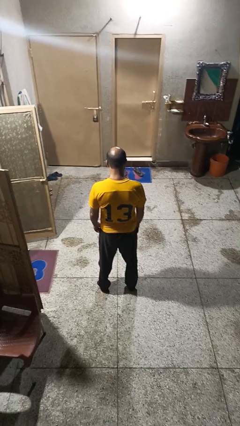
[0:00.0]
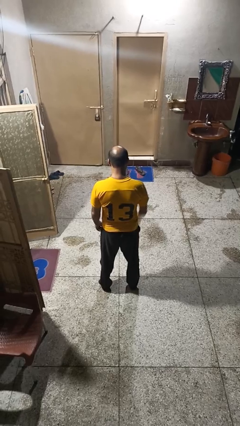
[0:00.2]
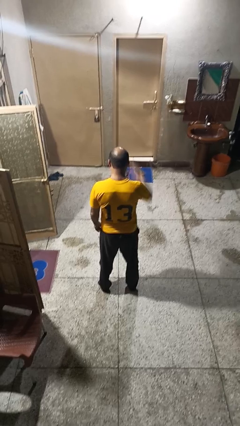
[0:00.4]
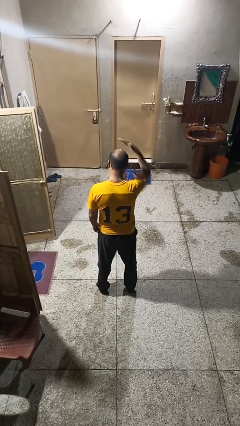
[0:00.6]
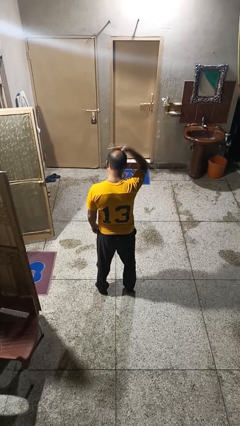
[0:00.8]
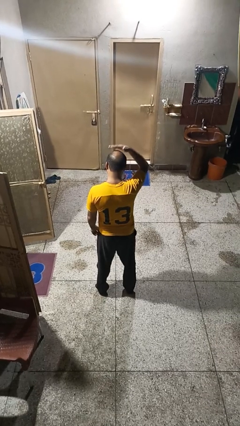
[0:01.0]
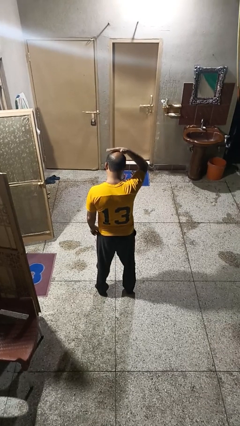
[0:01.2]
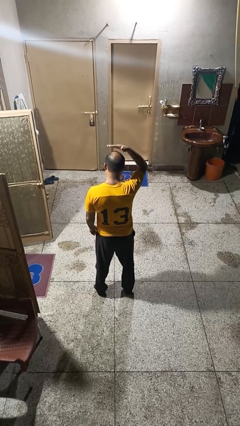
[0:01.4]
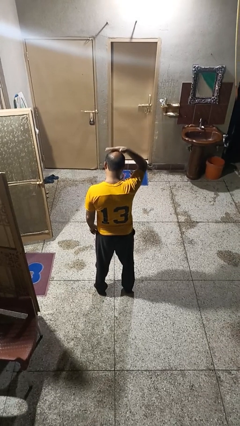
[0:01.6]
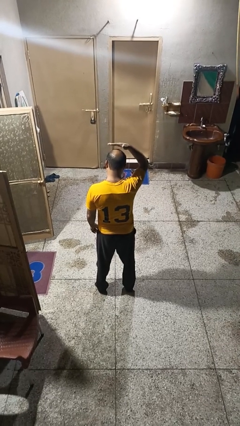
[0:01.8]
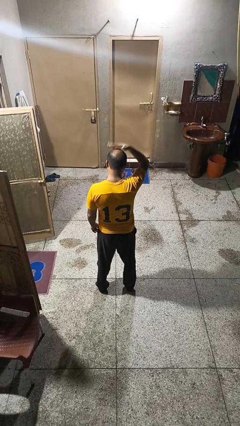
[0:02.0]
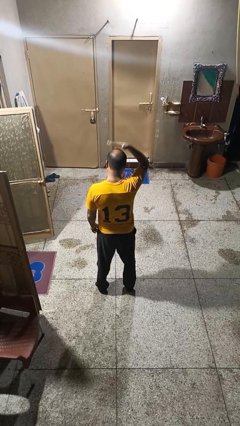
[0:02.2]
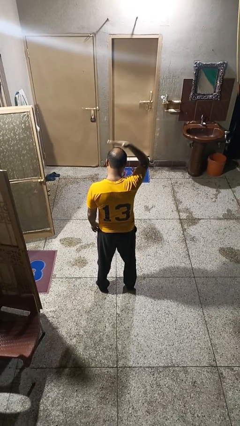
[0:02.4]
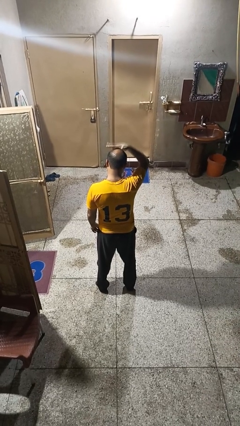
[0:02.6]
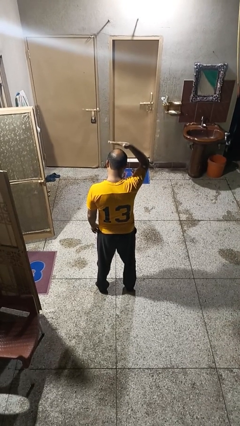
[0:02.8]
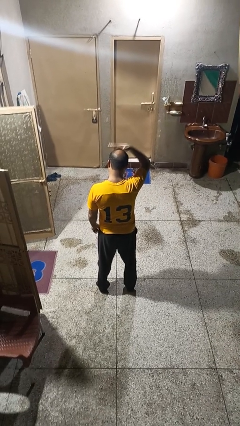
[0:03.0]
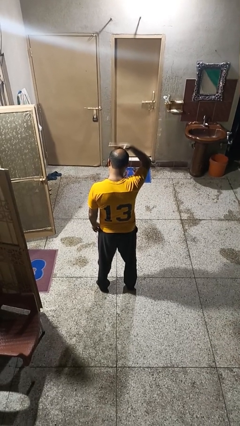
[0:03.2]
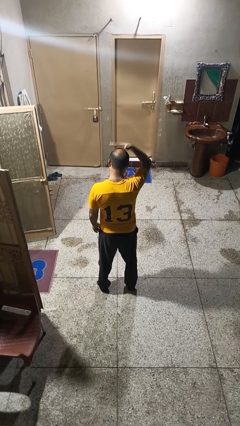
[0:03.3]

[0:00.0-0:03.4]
person pats head

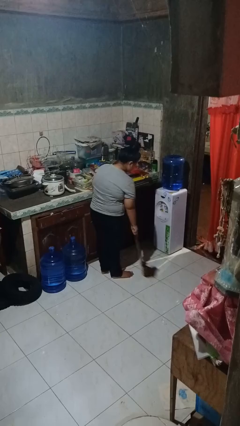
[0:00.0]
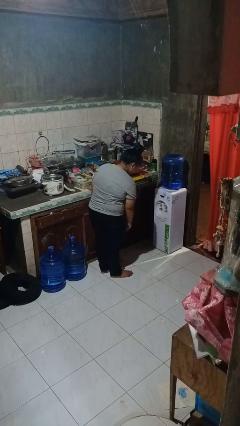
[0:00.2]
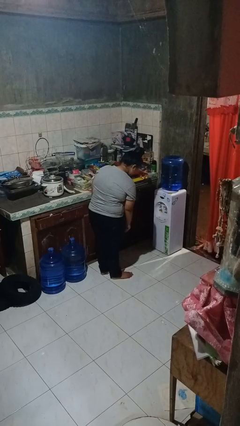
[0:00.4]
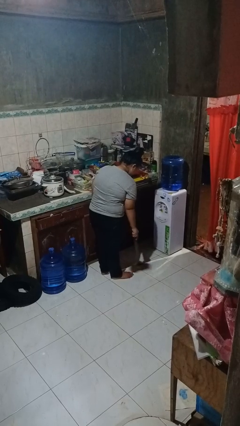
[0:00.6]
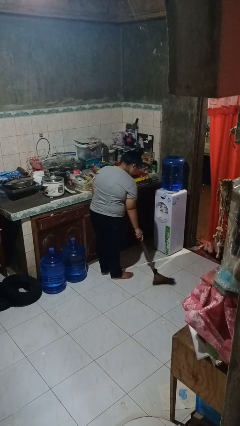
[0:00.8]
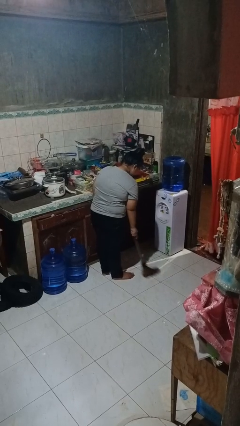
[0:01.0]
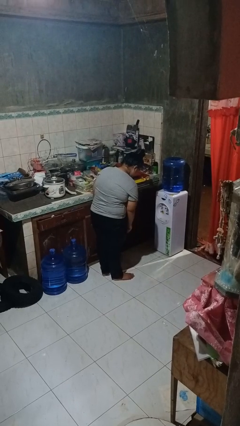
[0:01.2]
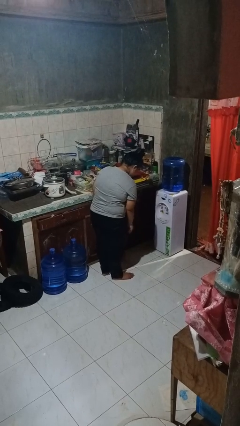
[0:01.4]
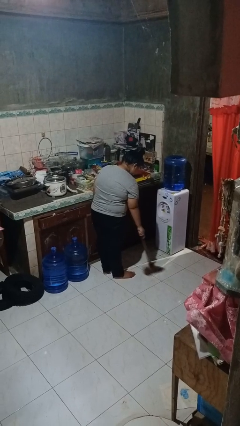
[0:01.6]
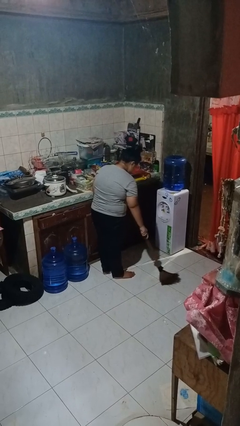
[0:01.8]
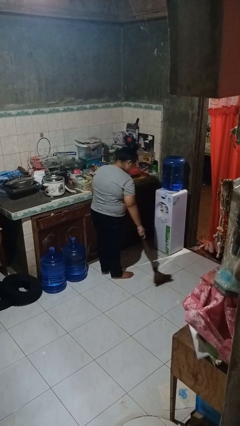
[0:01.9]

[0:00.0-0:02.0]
person sweeps floor

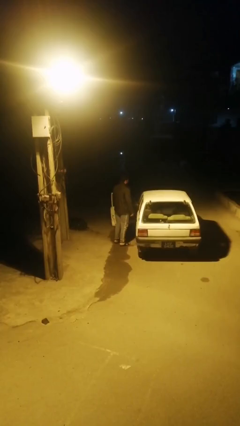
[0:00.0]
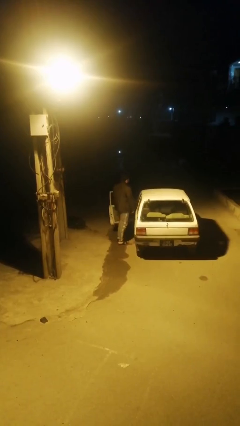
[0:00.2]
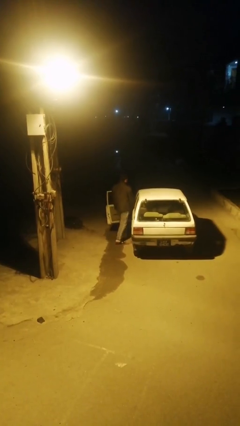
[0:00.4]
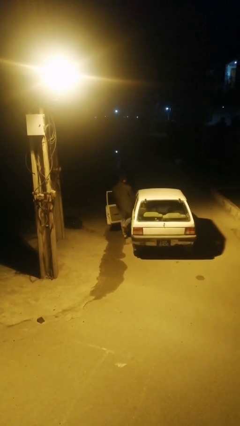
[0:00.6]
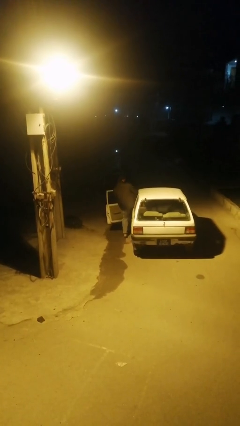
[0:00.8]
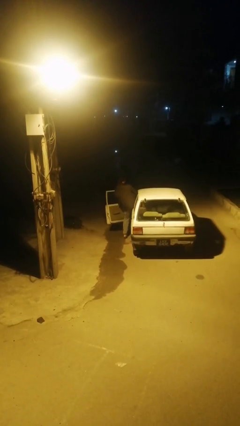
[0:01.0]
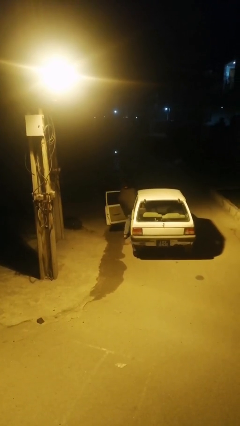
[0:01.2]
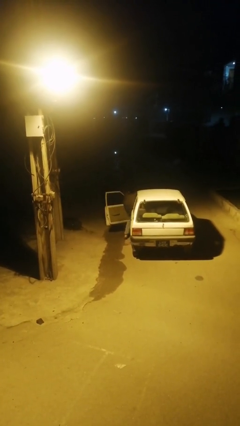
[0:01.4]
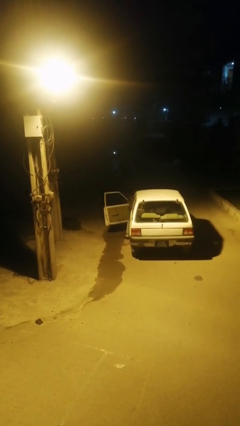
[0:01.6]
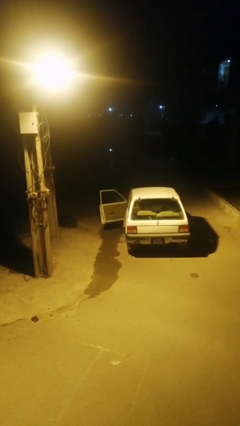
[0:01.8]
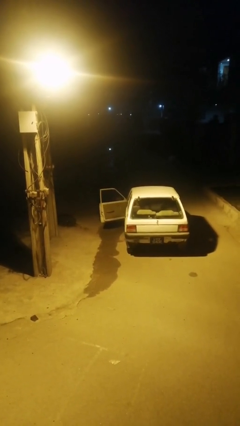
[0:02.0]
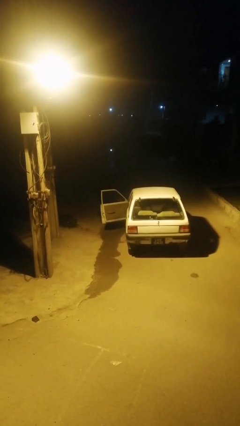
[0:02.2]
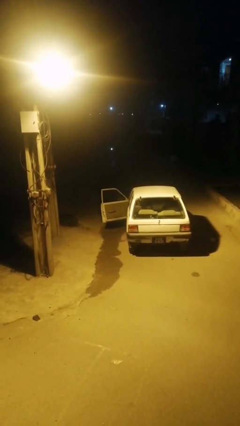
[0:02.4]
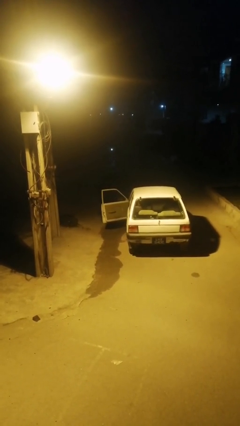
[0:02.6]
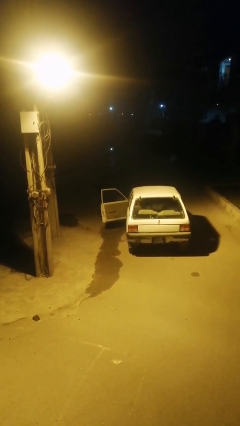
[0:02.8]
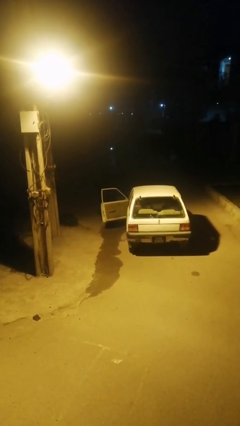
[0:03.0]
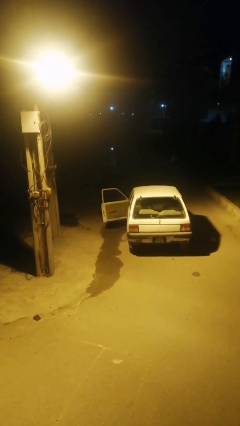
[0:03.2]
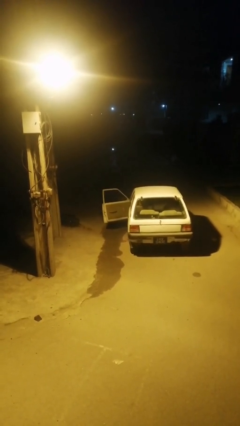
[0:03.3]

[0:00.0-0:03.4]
person enters car

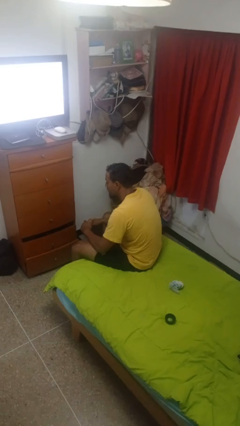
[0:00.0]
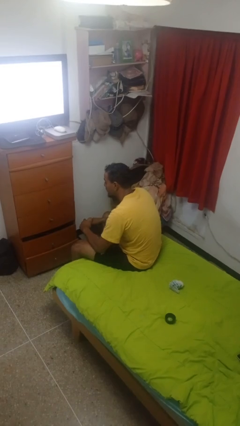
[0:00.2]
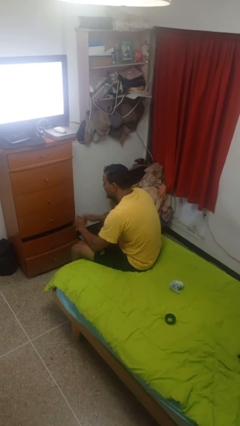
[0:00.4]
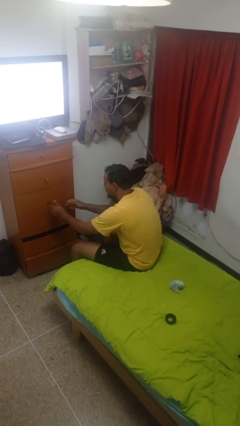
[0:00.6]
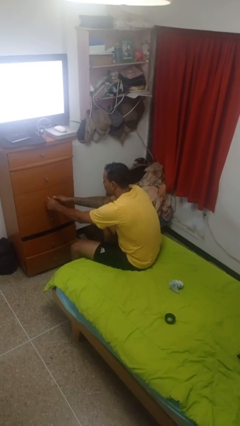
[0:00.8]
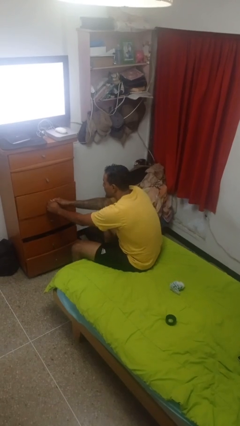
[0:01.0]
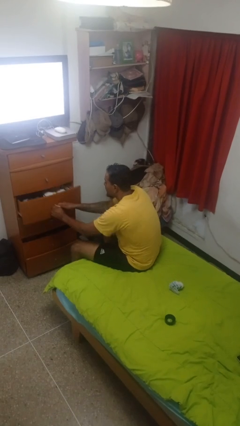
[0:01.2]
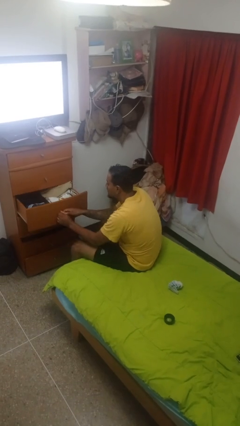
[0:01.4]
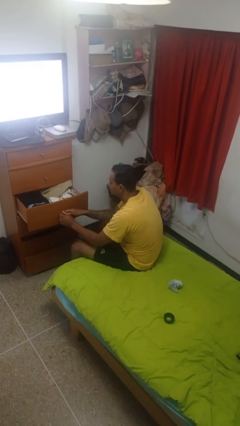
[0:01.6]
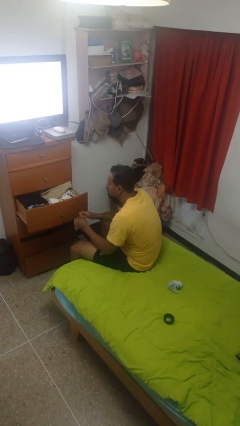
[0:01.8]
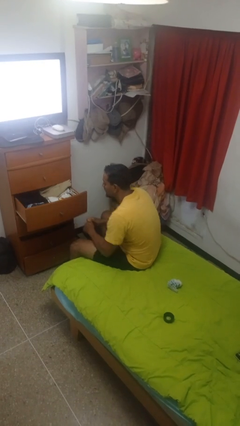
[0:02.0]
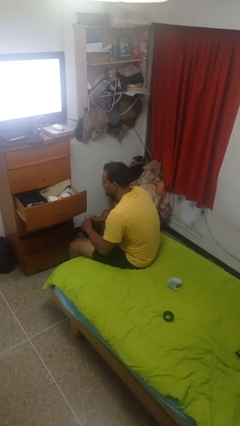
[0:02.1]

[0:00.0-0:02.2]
person opens dresser drawer

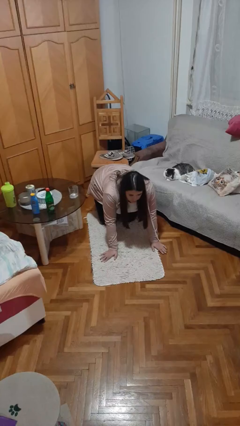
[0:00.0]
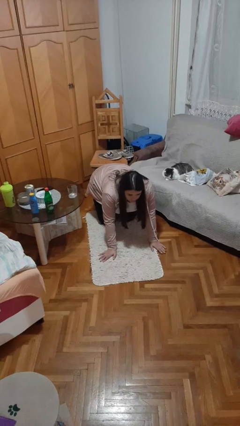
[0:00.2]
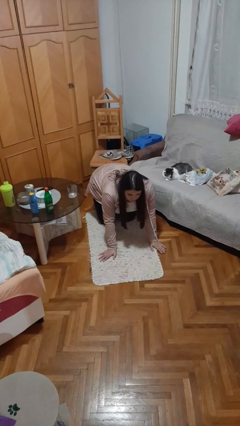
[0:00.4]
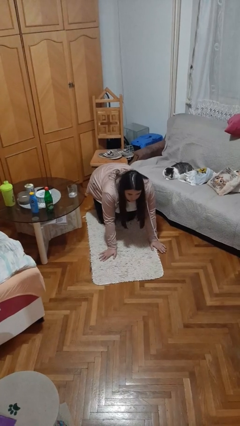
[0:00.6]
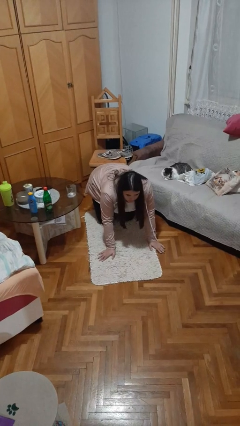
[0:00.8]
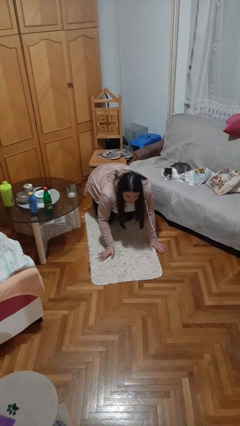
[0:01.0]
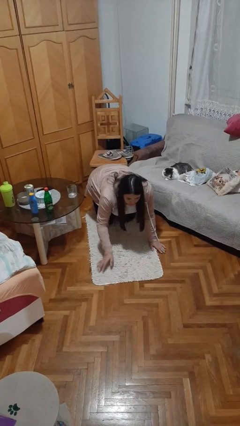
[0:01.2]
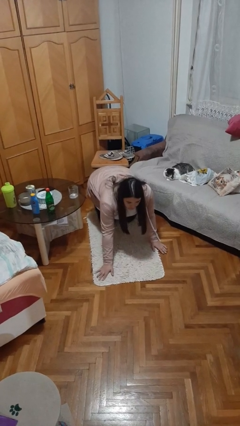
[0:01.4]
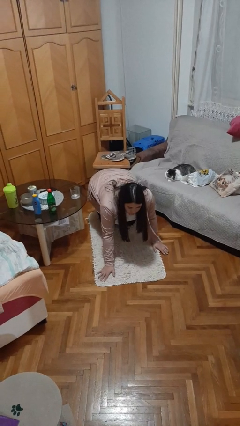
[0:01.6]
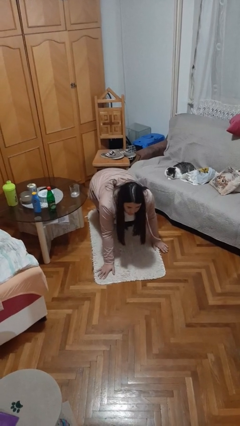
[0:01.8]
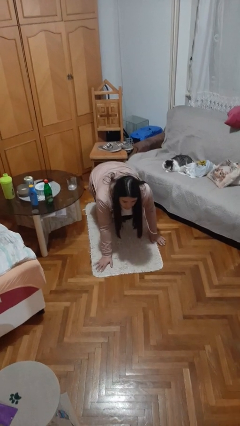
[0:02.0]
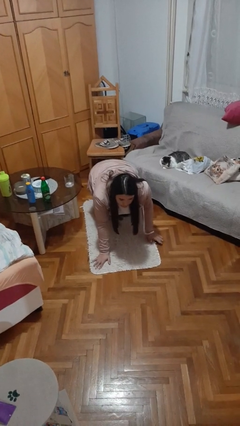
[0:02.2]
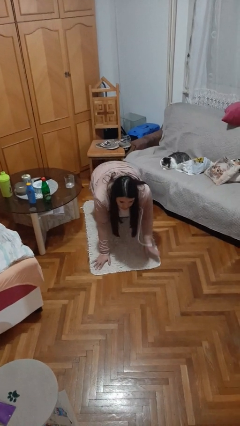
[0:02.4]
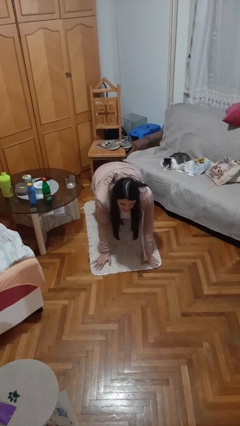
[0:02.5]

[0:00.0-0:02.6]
person crawls

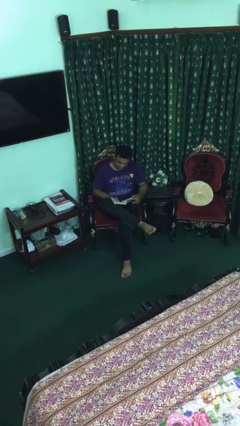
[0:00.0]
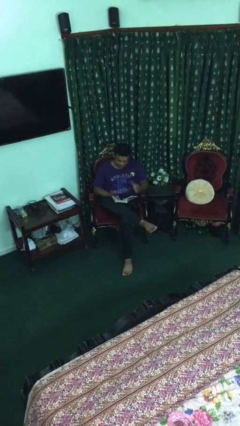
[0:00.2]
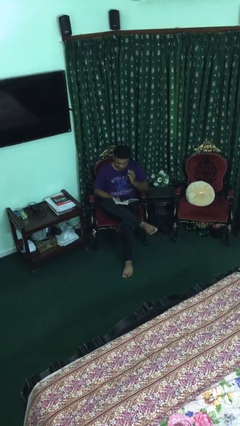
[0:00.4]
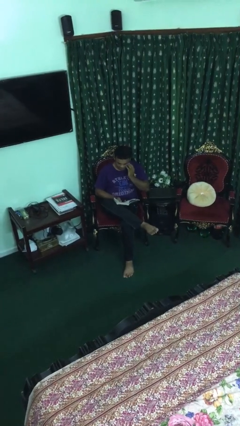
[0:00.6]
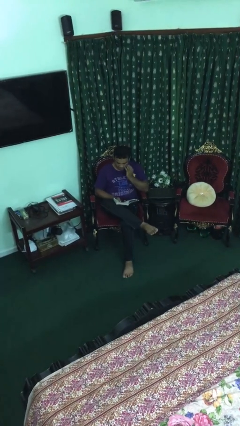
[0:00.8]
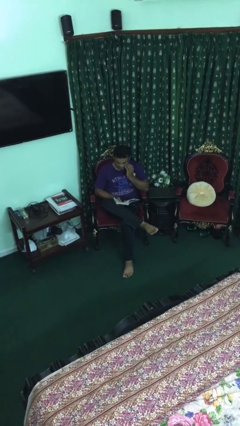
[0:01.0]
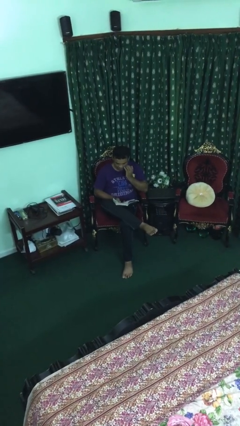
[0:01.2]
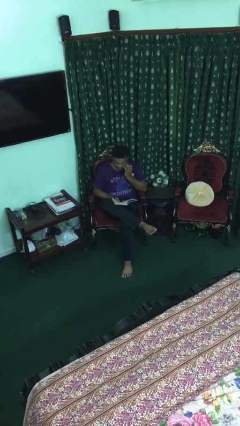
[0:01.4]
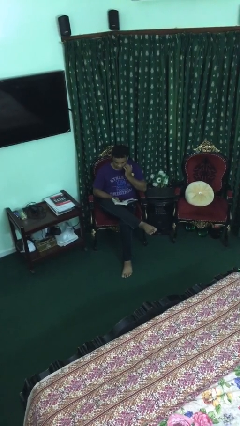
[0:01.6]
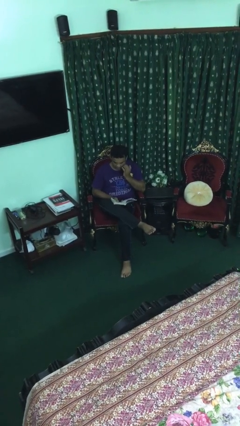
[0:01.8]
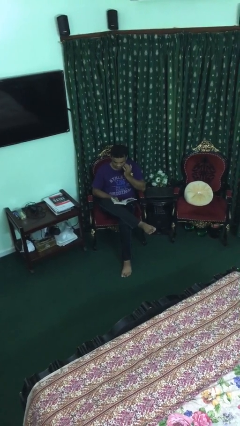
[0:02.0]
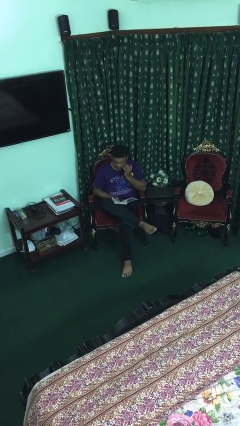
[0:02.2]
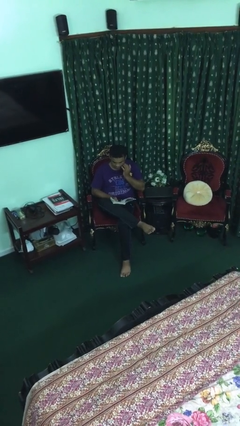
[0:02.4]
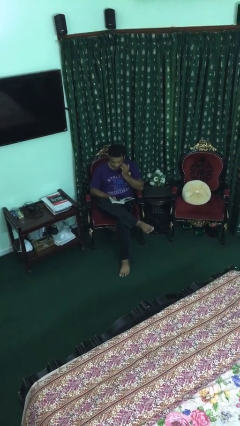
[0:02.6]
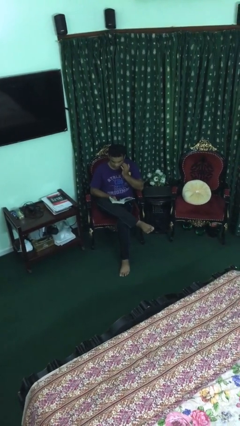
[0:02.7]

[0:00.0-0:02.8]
person reads document

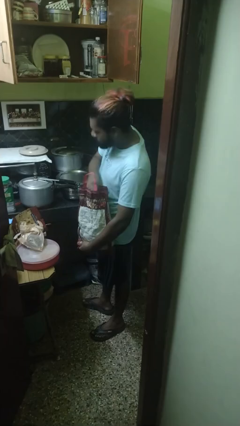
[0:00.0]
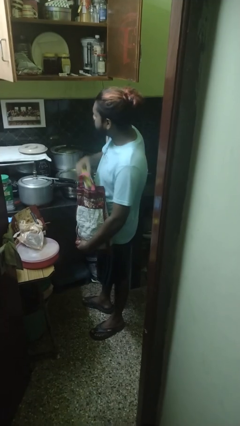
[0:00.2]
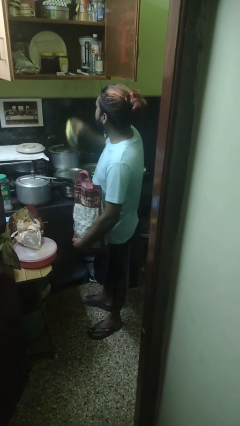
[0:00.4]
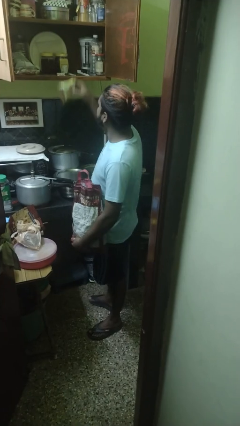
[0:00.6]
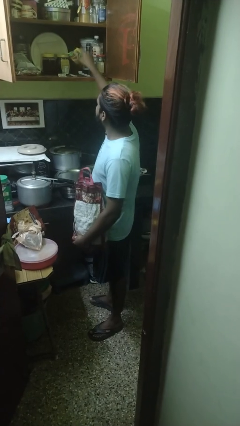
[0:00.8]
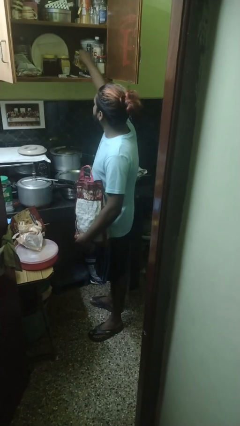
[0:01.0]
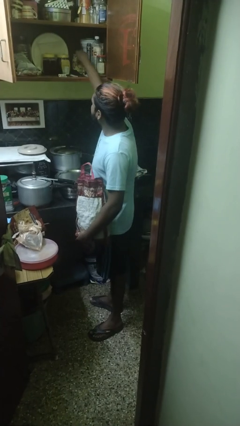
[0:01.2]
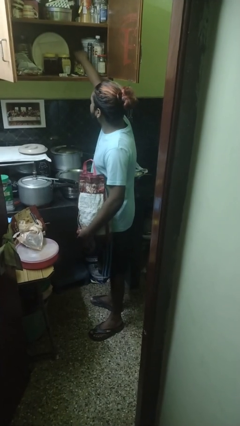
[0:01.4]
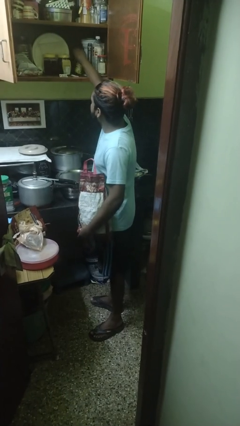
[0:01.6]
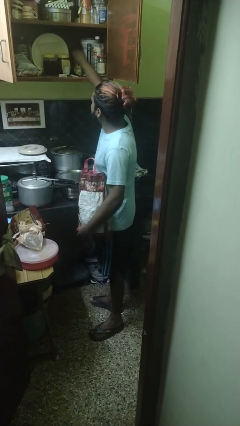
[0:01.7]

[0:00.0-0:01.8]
person loads groceries into cabinet
